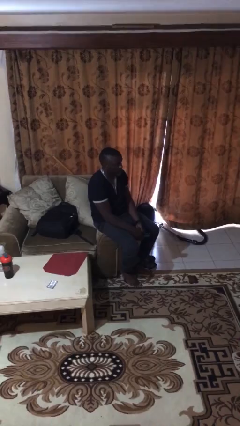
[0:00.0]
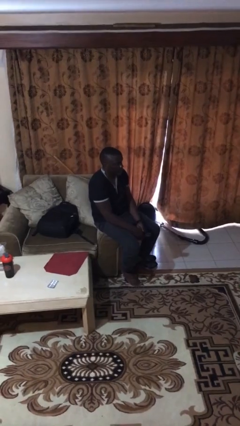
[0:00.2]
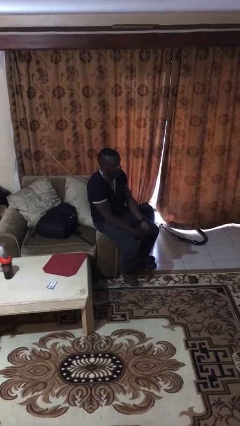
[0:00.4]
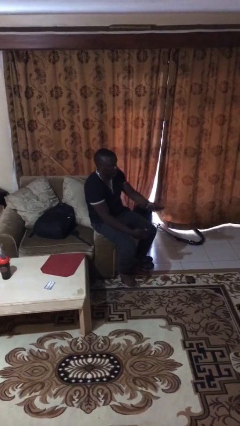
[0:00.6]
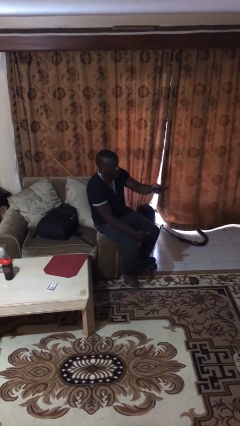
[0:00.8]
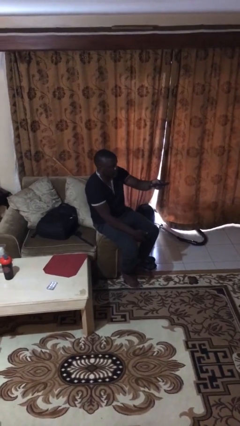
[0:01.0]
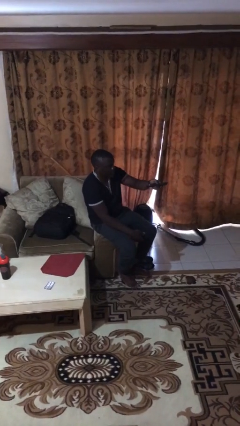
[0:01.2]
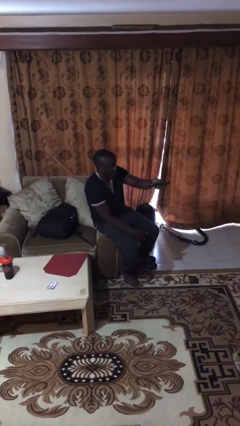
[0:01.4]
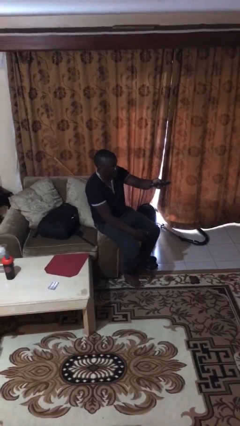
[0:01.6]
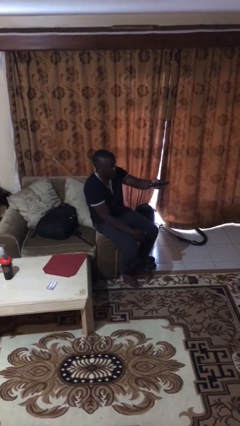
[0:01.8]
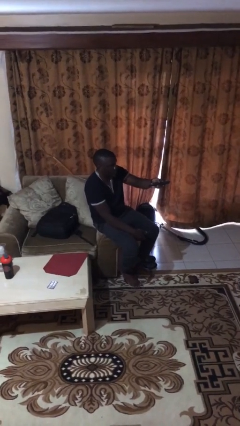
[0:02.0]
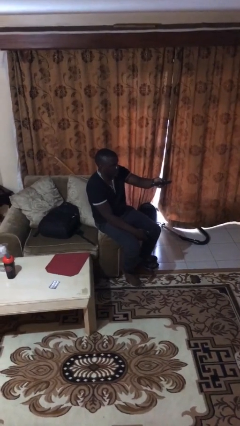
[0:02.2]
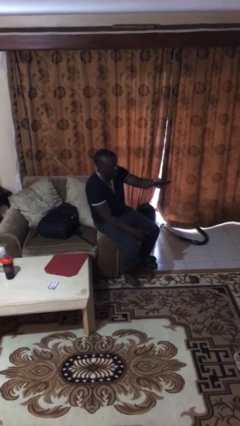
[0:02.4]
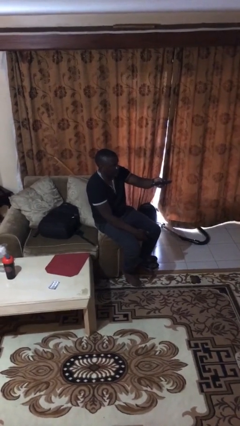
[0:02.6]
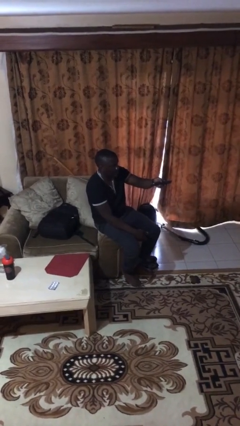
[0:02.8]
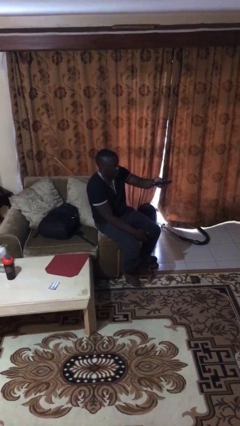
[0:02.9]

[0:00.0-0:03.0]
person uses television remote

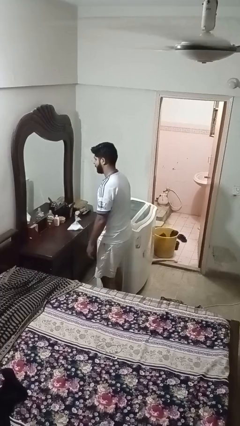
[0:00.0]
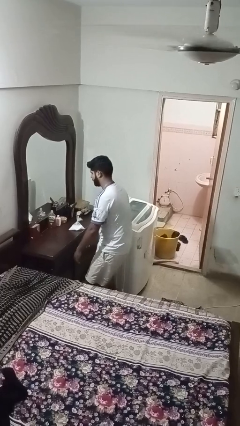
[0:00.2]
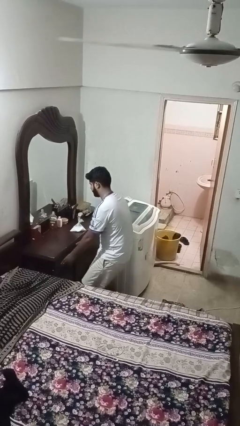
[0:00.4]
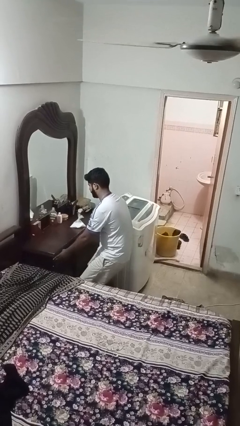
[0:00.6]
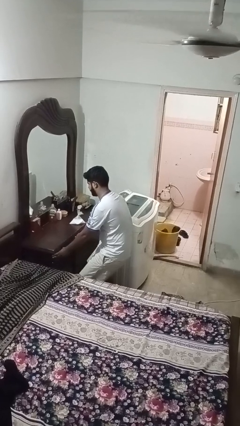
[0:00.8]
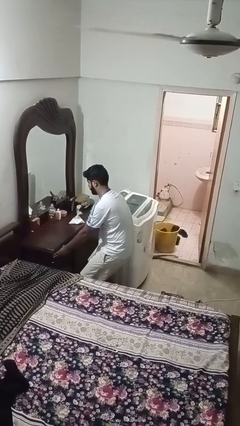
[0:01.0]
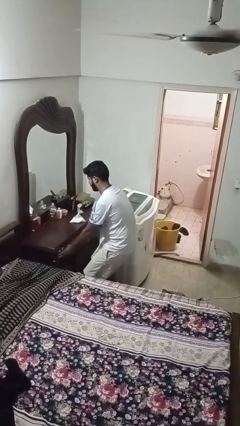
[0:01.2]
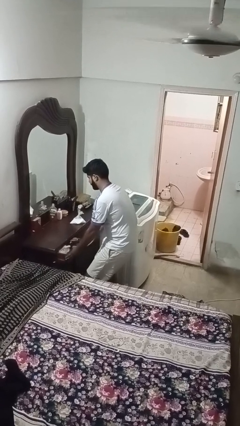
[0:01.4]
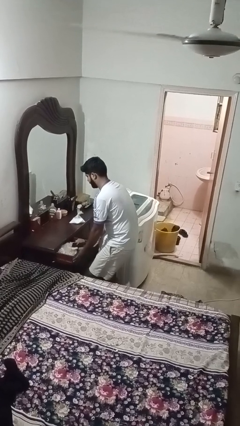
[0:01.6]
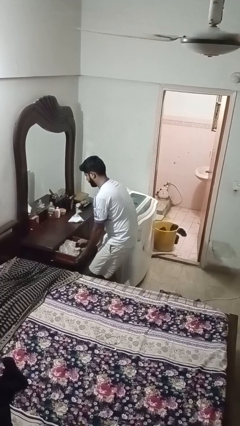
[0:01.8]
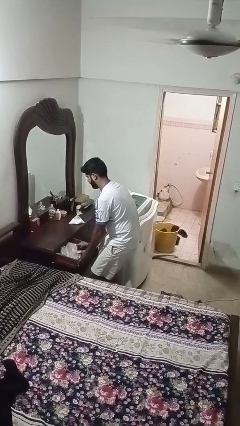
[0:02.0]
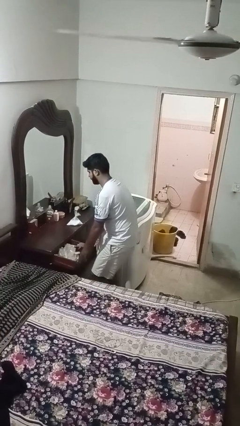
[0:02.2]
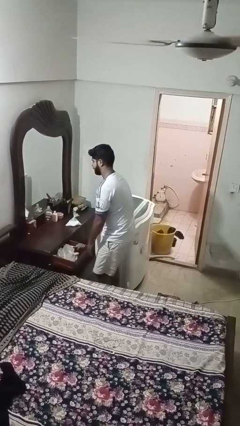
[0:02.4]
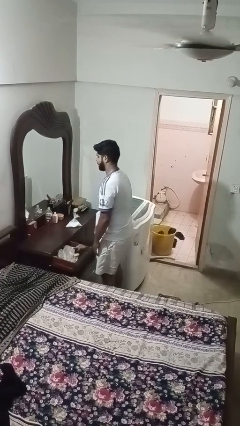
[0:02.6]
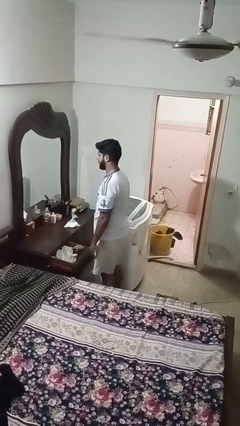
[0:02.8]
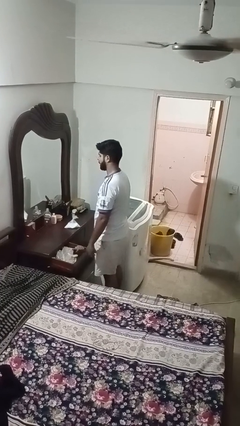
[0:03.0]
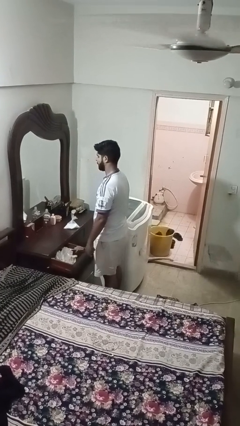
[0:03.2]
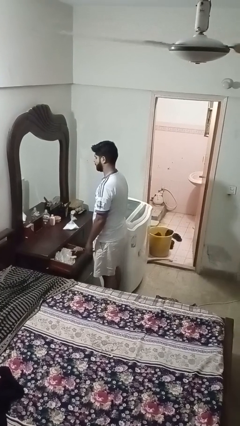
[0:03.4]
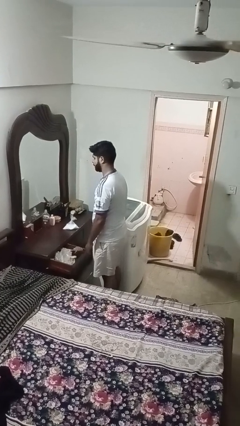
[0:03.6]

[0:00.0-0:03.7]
person opens dresser drawer

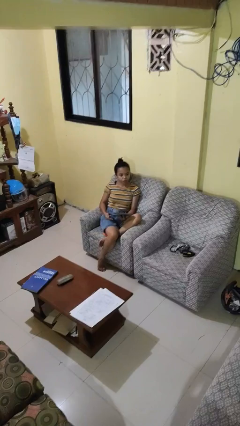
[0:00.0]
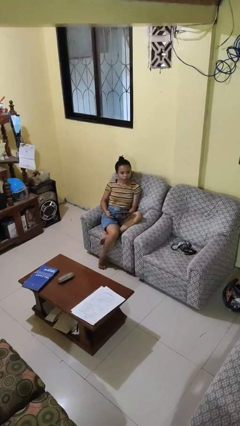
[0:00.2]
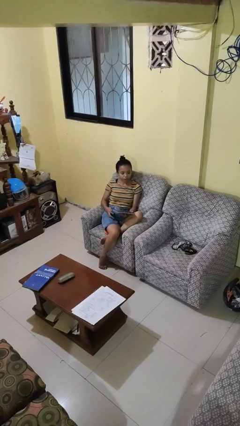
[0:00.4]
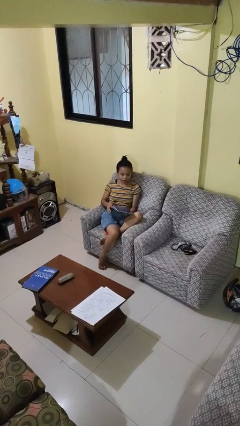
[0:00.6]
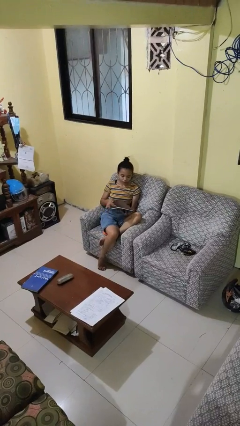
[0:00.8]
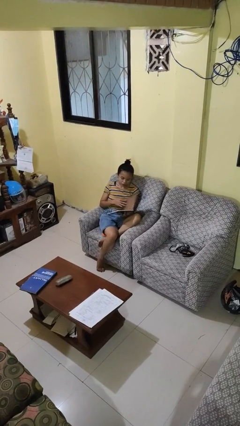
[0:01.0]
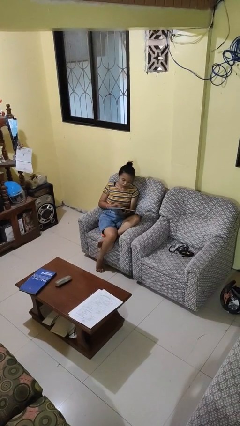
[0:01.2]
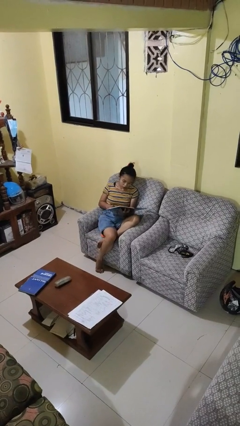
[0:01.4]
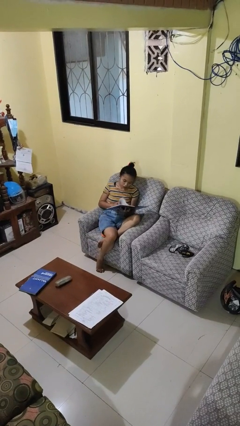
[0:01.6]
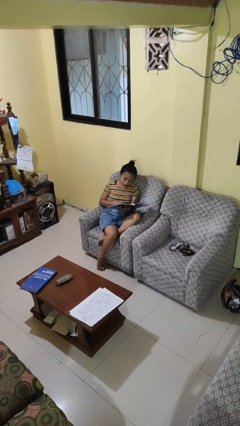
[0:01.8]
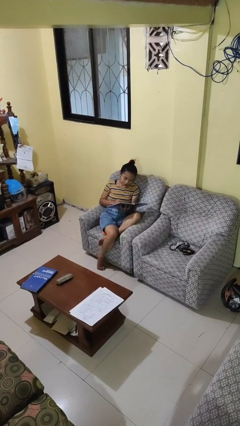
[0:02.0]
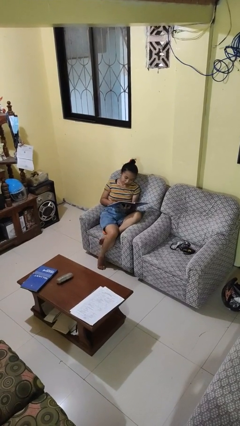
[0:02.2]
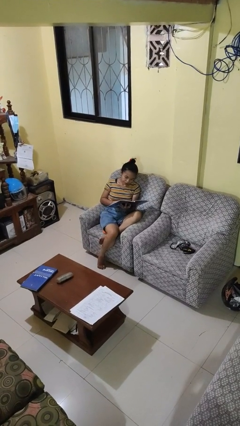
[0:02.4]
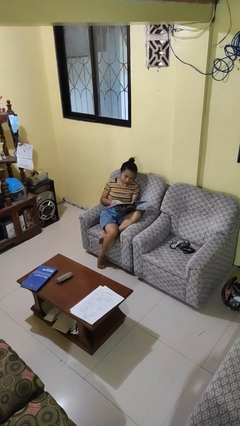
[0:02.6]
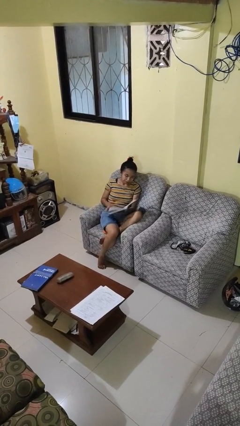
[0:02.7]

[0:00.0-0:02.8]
person reads book

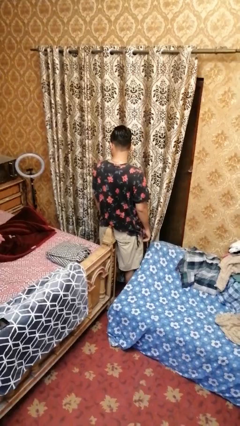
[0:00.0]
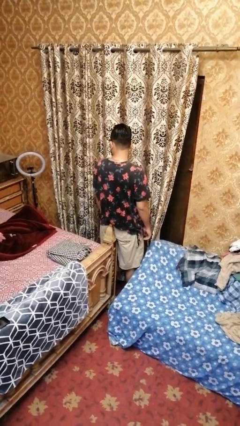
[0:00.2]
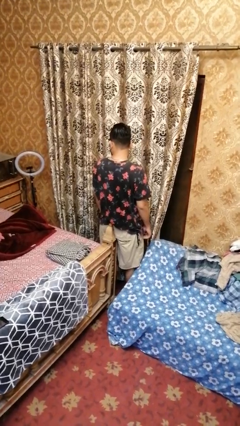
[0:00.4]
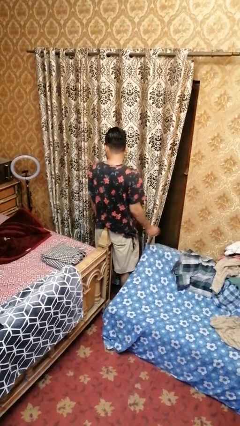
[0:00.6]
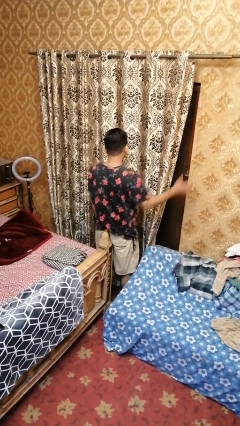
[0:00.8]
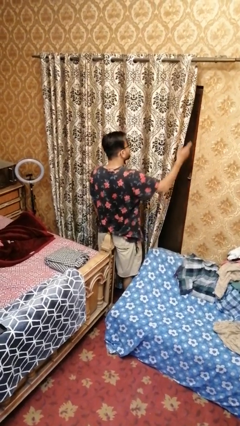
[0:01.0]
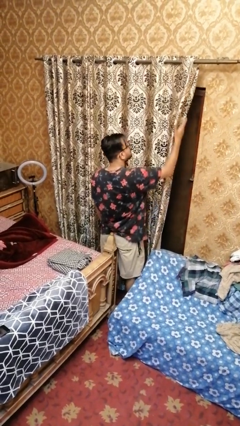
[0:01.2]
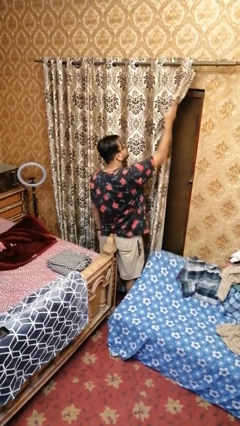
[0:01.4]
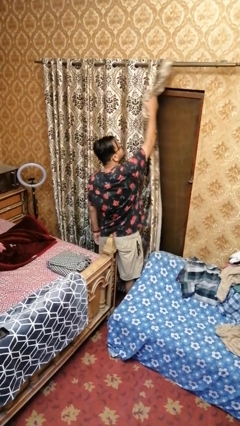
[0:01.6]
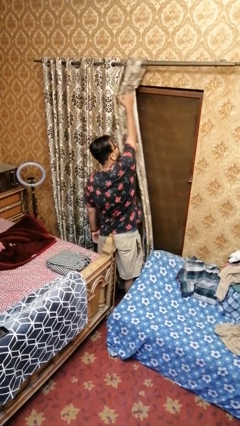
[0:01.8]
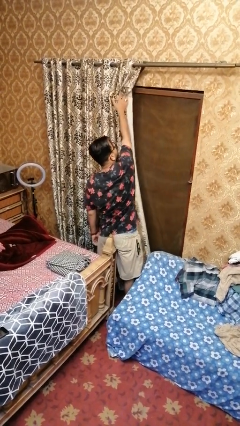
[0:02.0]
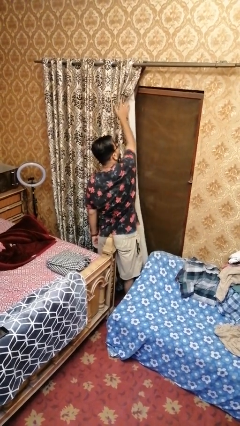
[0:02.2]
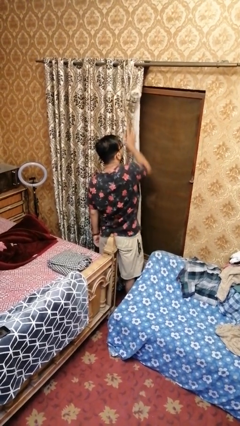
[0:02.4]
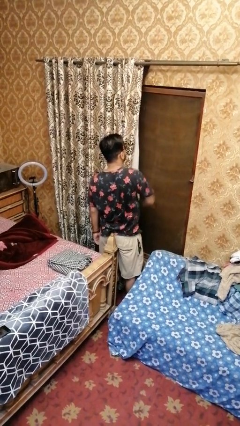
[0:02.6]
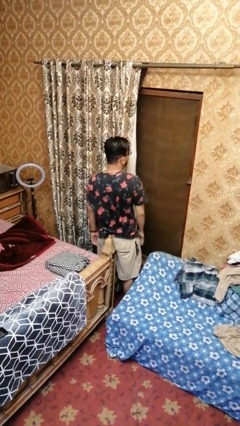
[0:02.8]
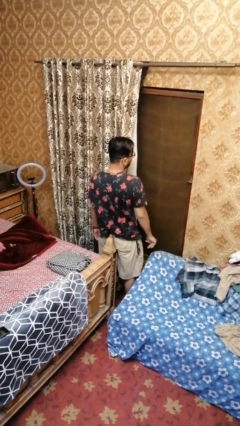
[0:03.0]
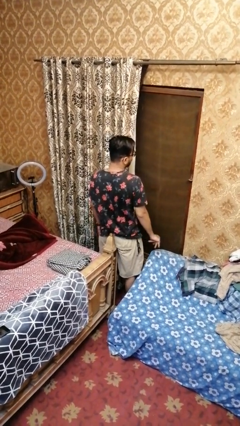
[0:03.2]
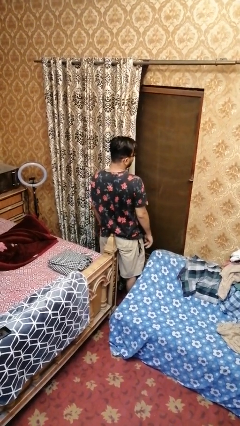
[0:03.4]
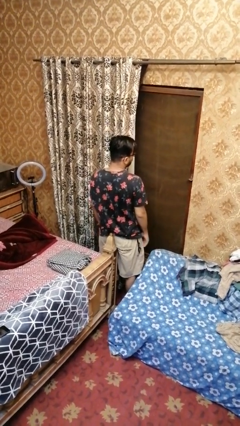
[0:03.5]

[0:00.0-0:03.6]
person opens curtains

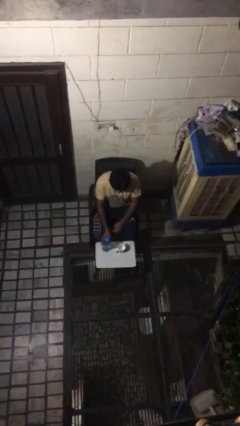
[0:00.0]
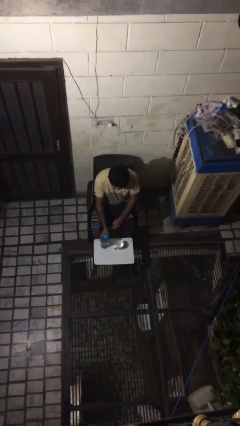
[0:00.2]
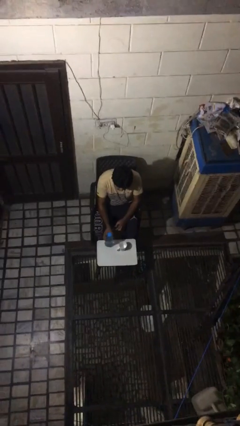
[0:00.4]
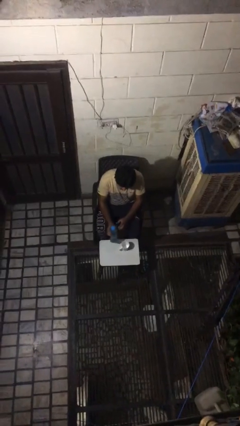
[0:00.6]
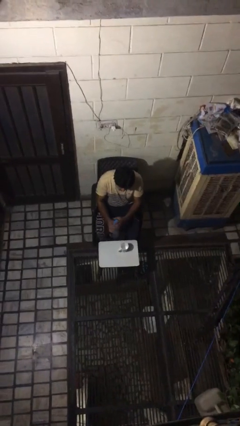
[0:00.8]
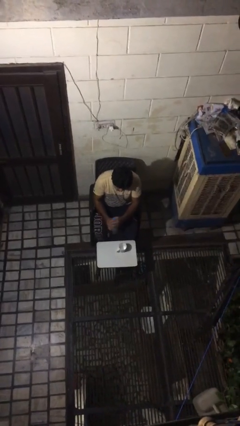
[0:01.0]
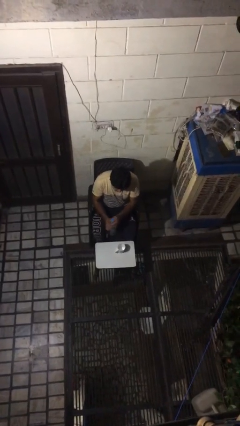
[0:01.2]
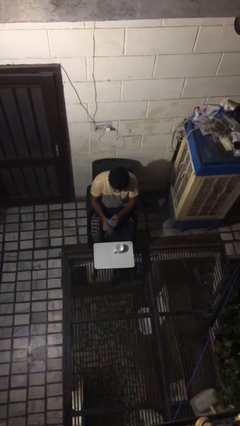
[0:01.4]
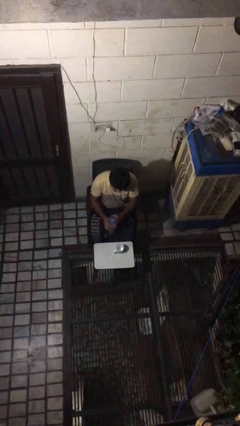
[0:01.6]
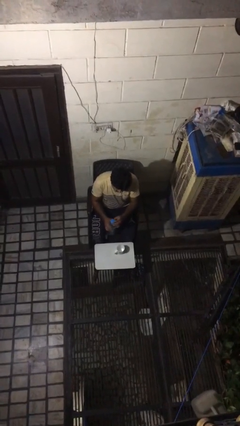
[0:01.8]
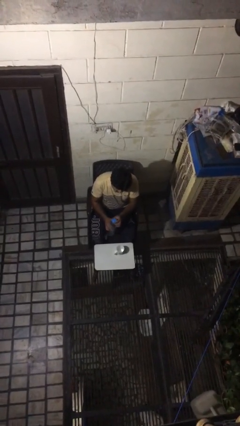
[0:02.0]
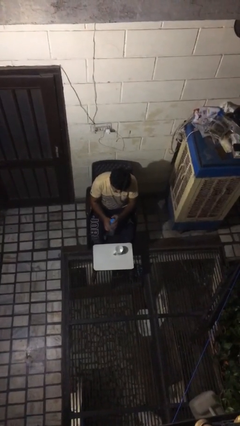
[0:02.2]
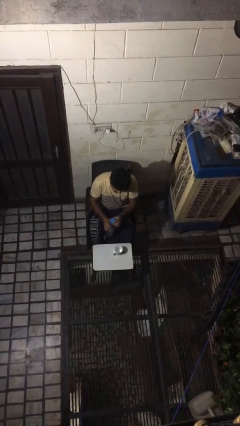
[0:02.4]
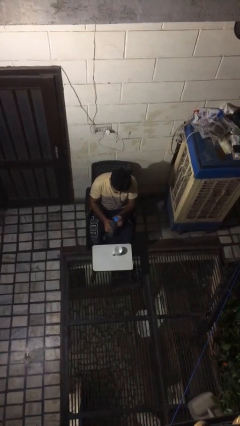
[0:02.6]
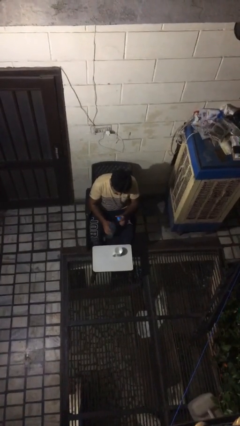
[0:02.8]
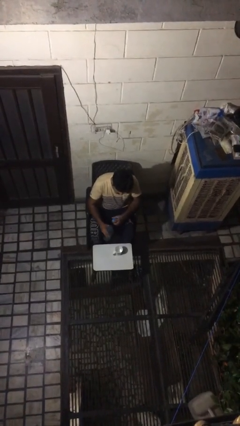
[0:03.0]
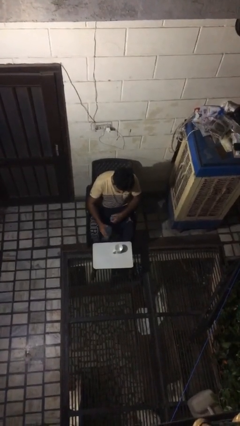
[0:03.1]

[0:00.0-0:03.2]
person unscrews lid from bottle

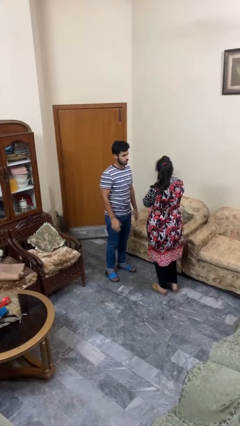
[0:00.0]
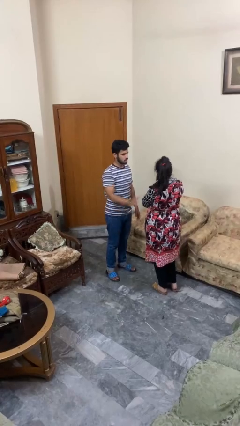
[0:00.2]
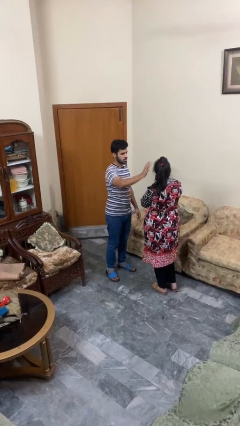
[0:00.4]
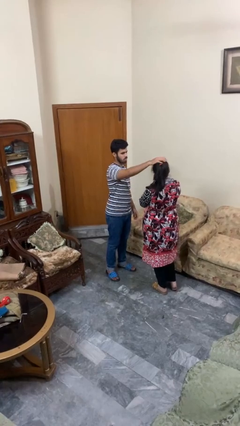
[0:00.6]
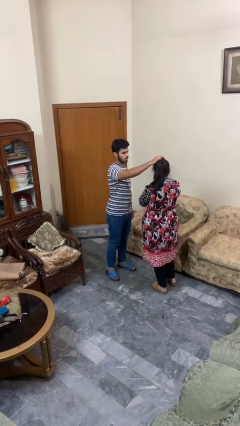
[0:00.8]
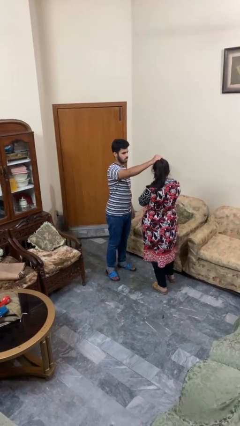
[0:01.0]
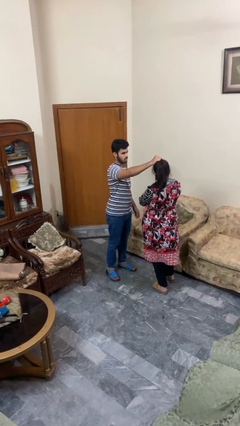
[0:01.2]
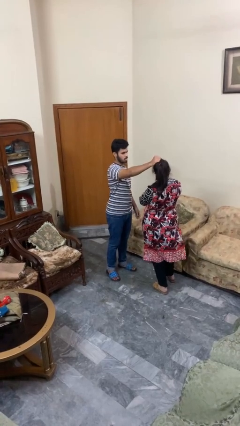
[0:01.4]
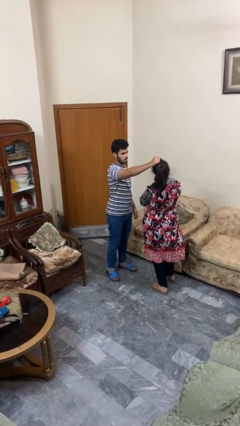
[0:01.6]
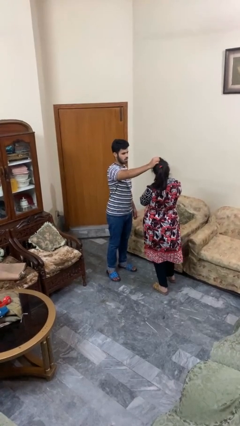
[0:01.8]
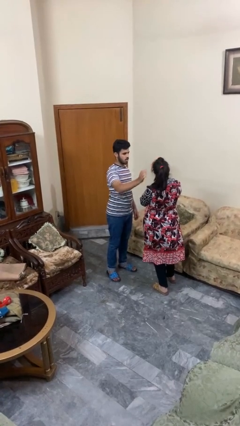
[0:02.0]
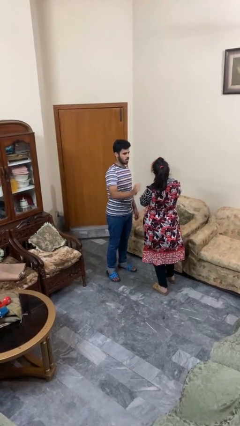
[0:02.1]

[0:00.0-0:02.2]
person grabs person by hair
